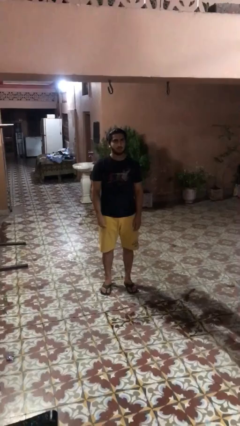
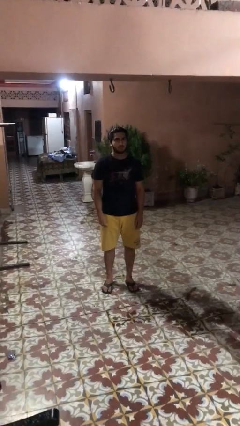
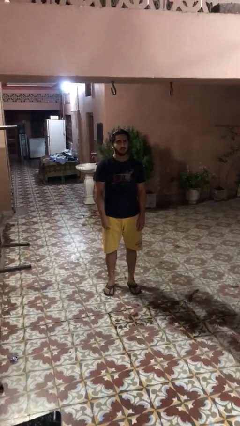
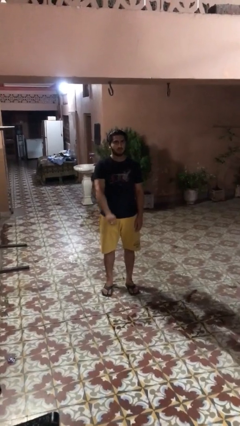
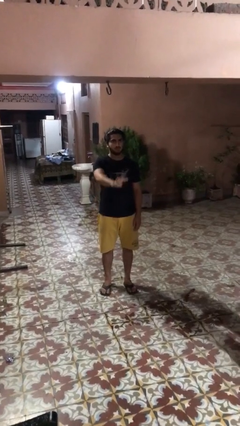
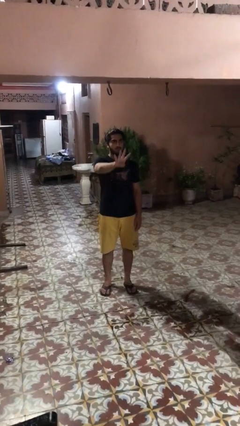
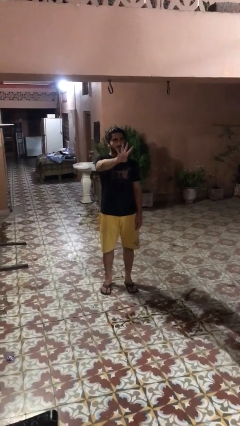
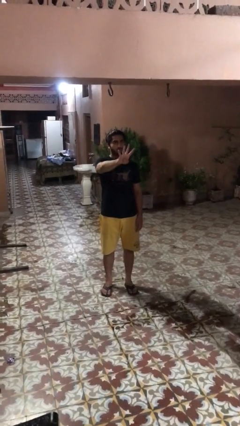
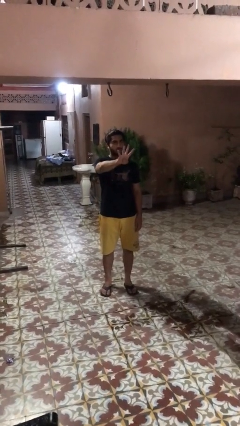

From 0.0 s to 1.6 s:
person gestures number four

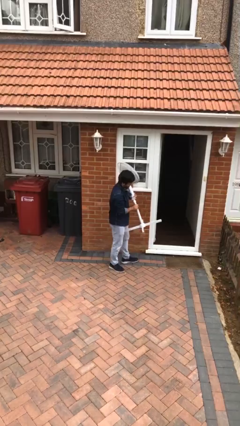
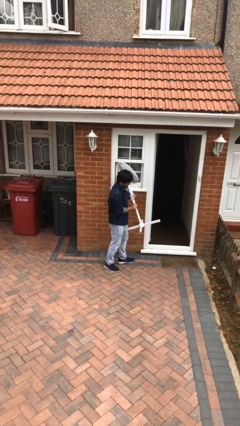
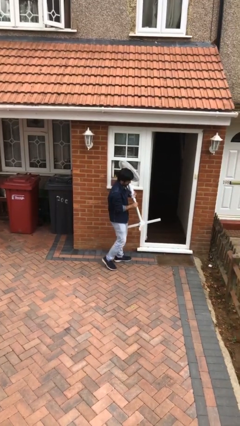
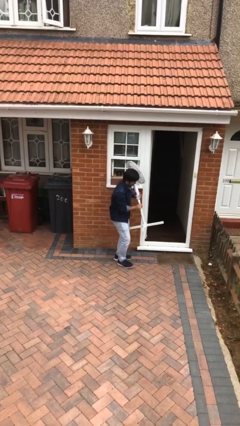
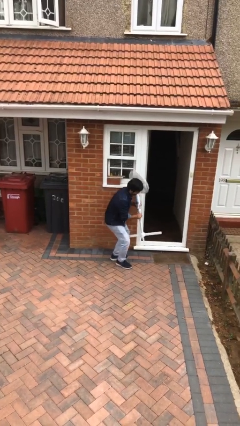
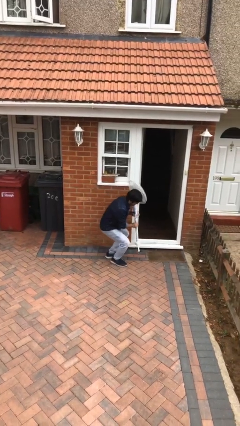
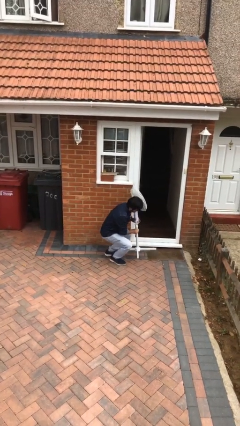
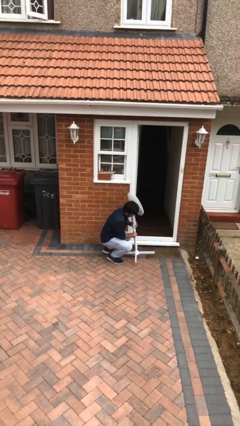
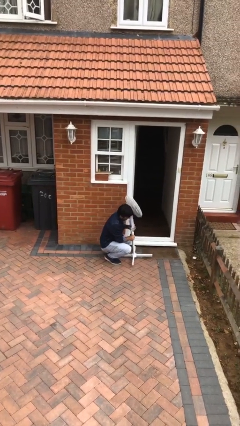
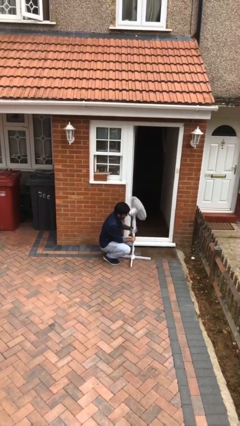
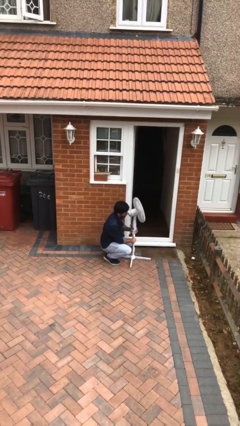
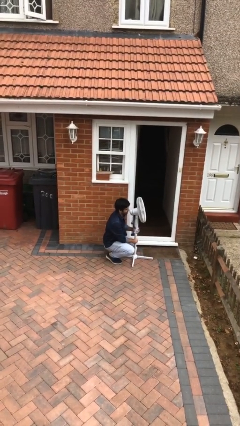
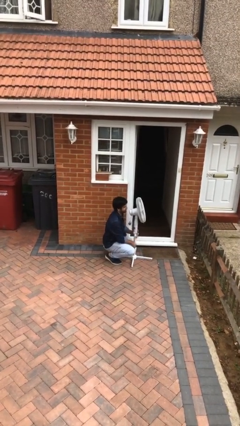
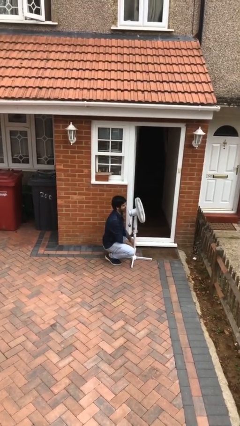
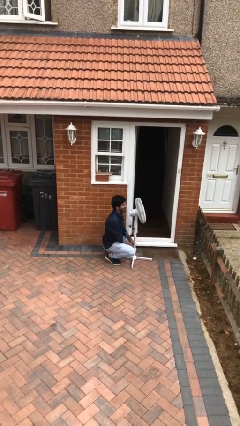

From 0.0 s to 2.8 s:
person puts down object on floor

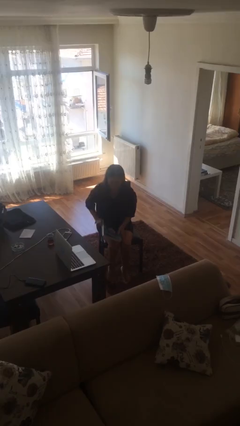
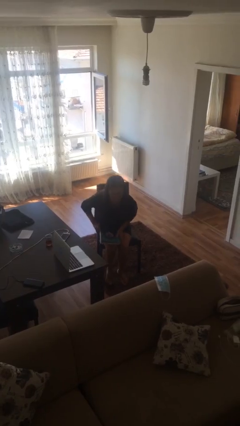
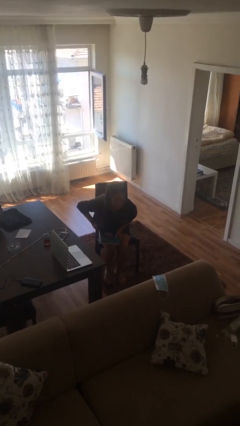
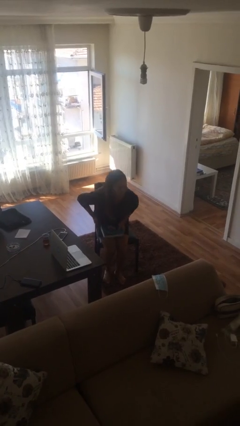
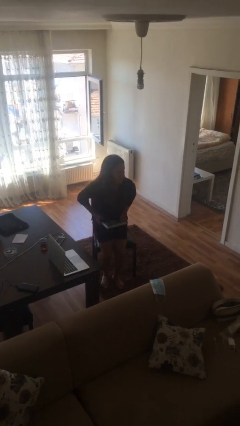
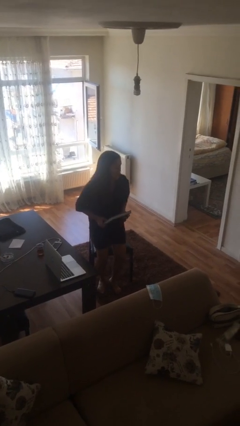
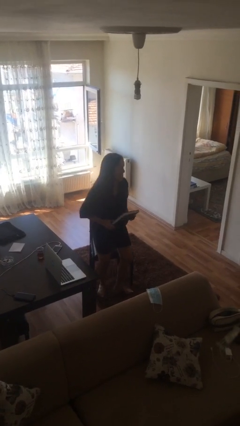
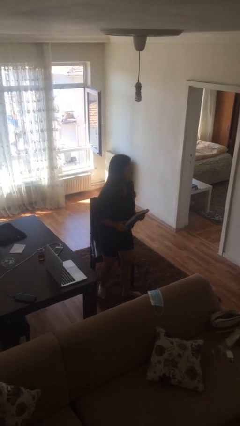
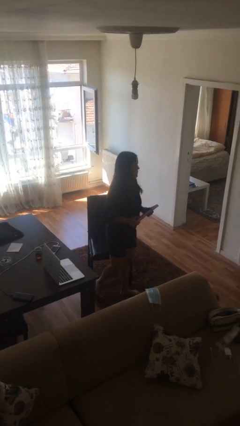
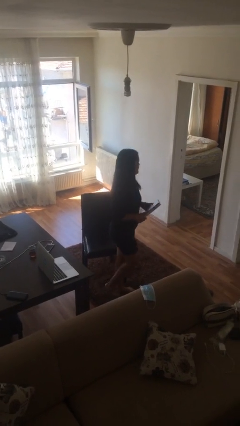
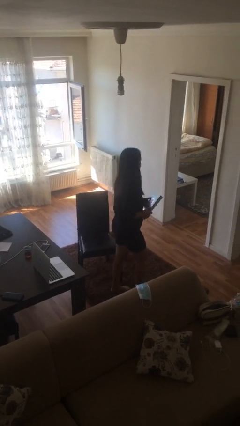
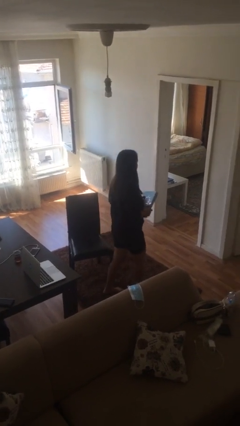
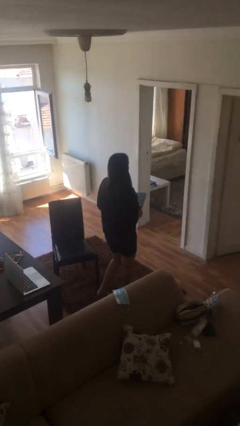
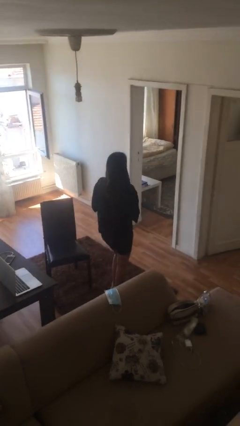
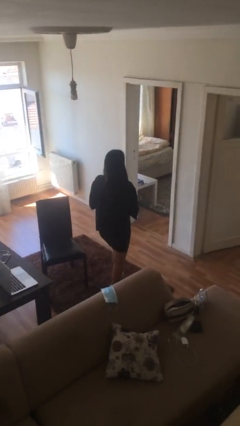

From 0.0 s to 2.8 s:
person stands up

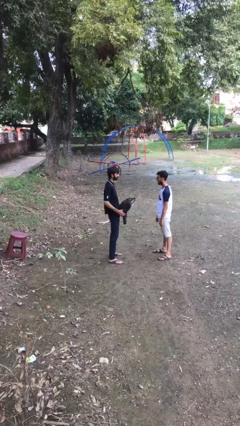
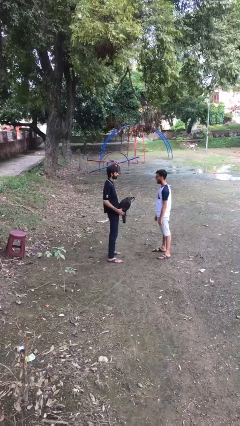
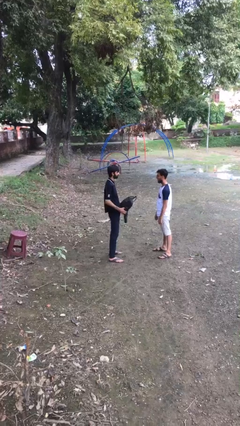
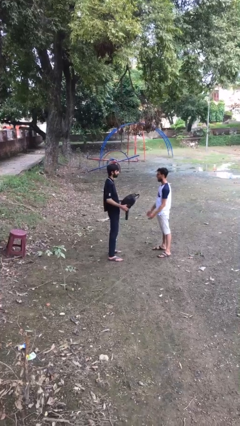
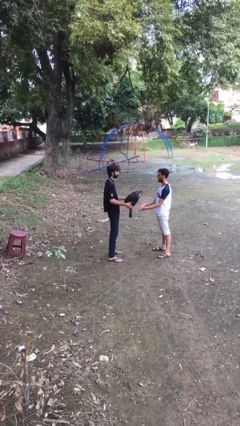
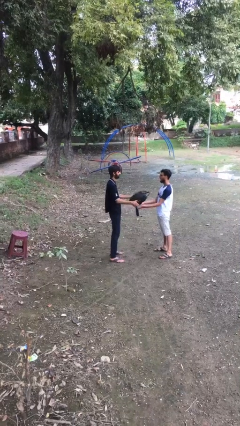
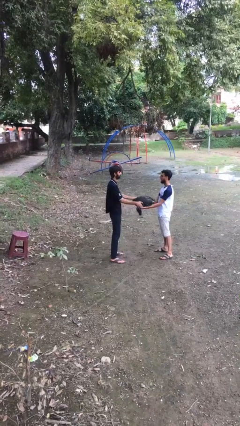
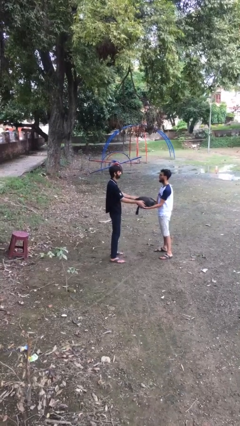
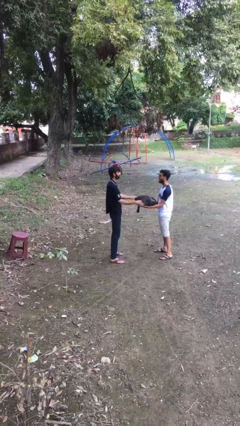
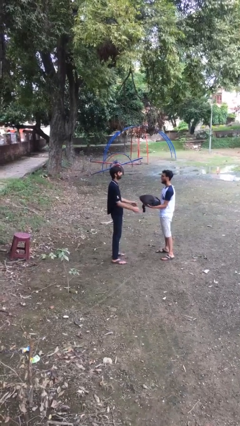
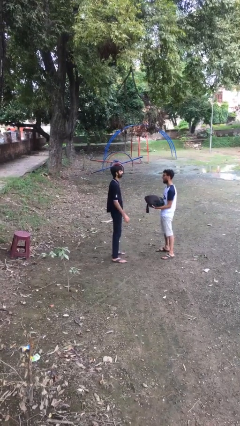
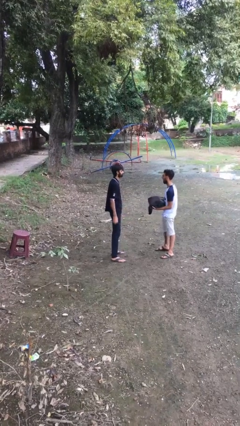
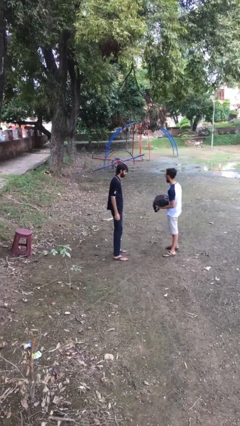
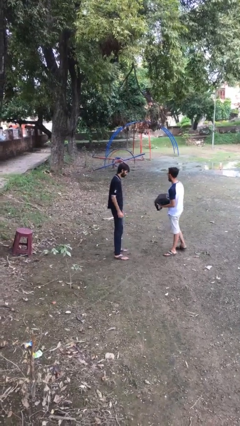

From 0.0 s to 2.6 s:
person transfers object to person

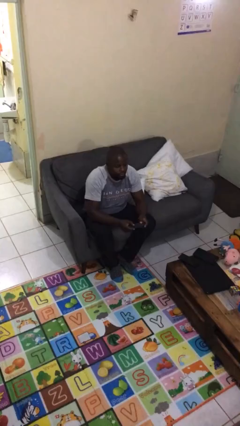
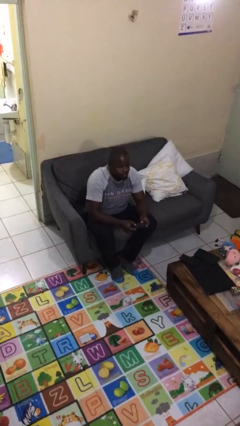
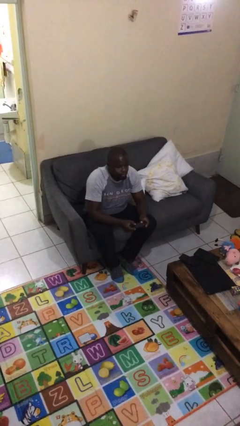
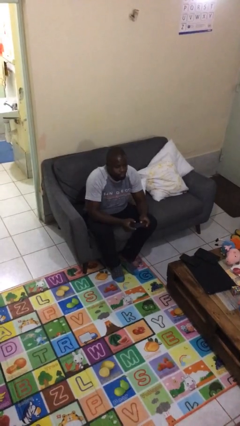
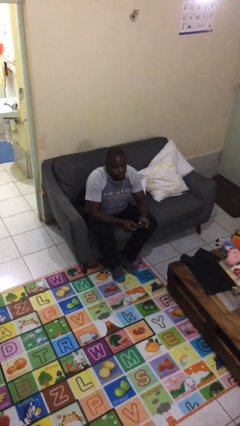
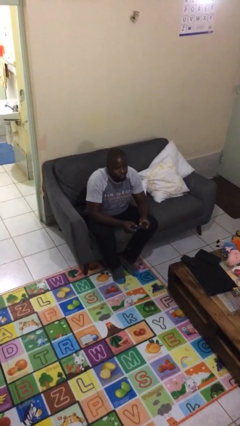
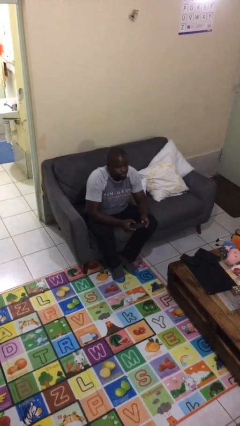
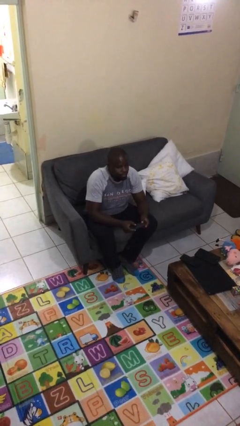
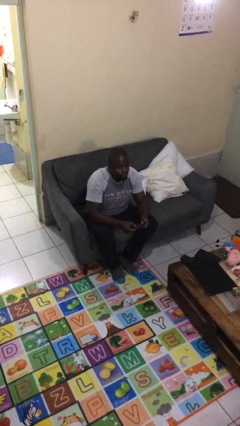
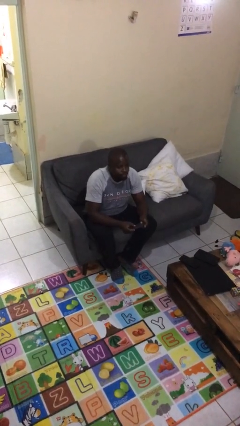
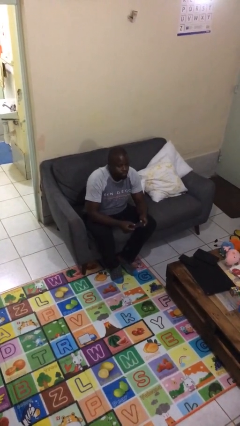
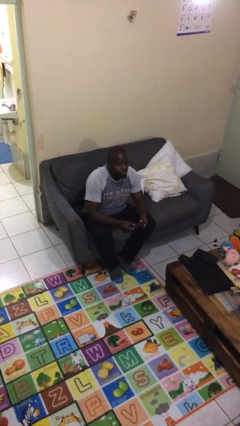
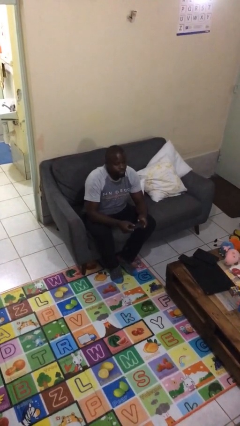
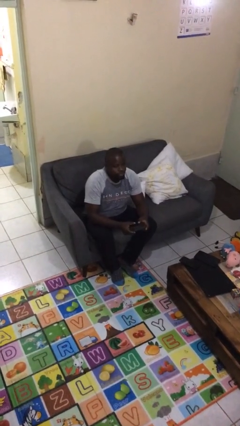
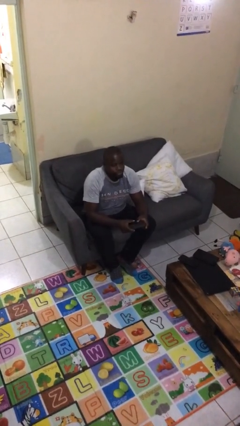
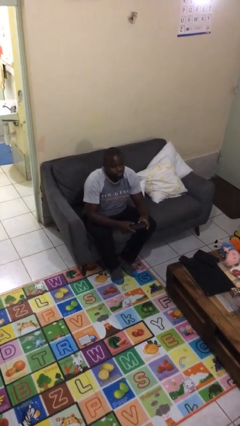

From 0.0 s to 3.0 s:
person interacts with handheld game

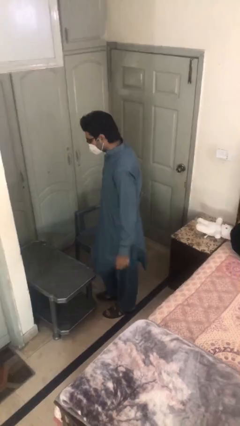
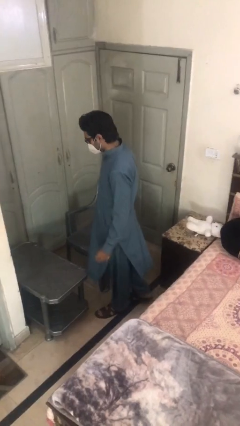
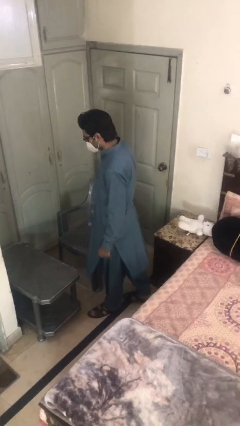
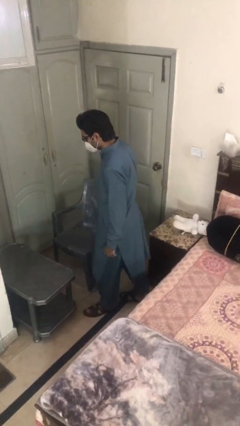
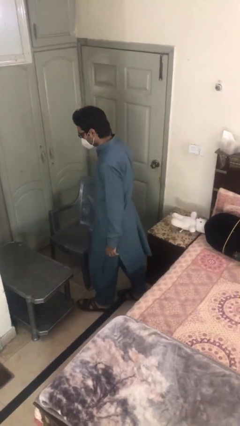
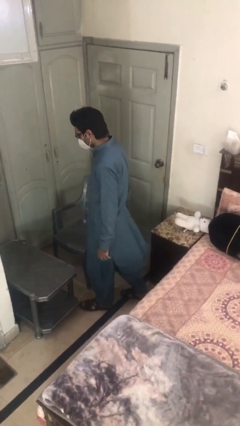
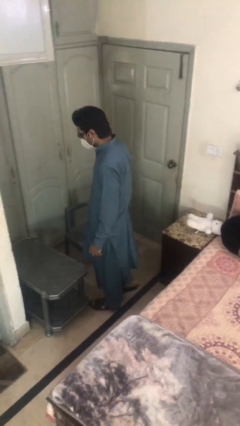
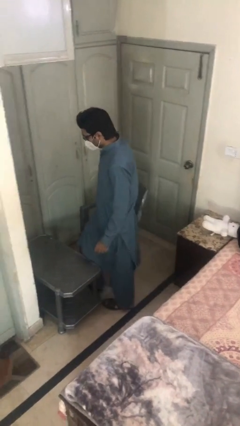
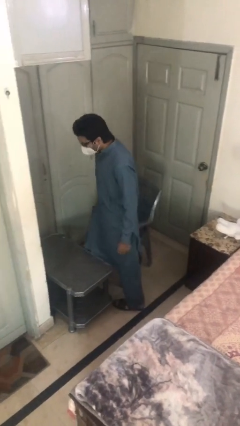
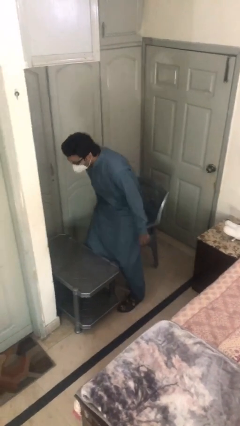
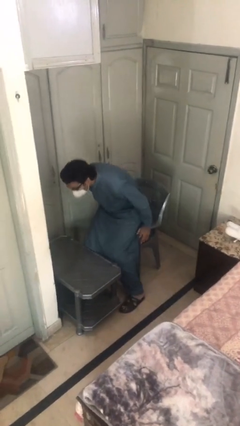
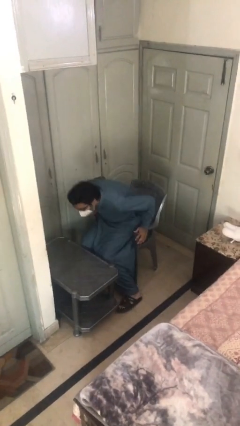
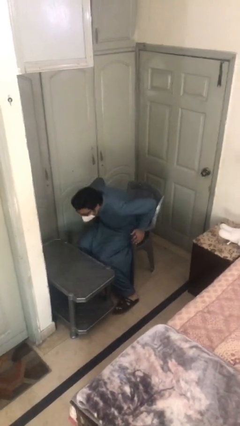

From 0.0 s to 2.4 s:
person sits down

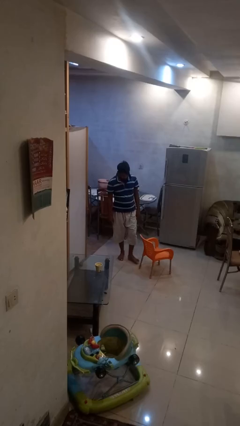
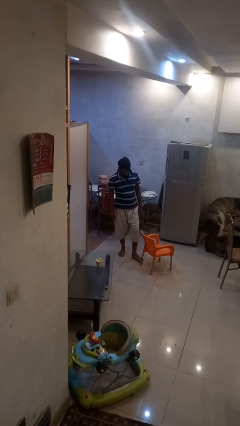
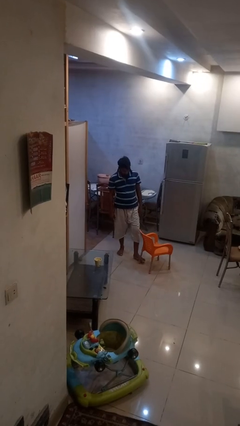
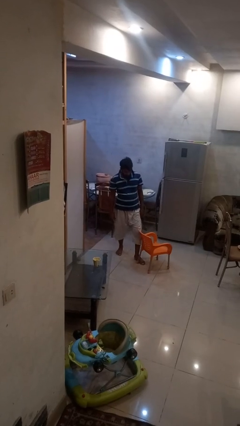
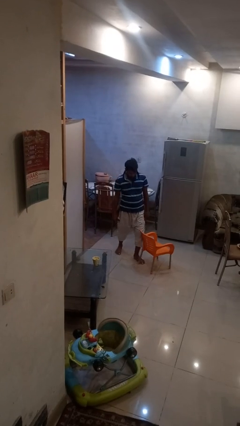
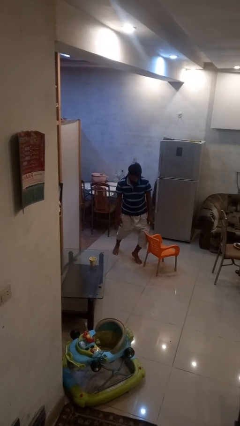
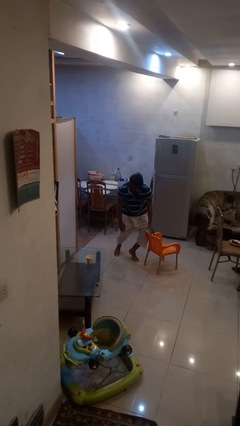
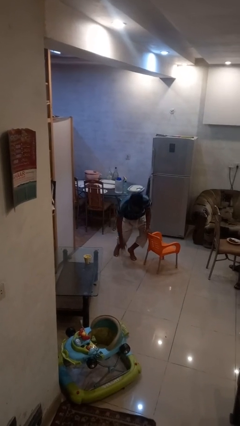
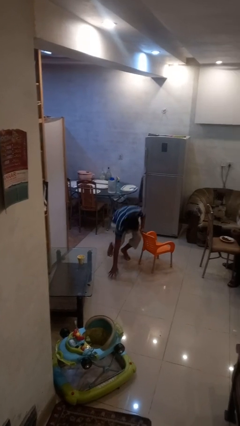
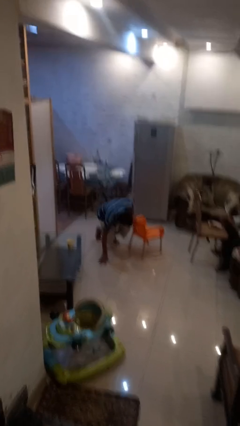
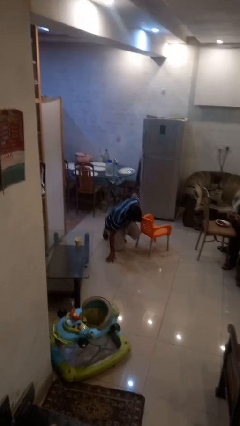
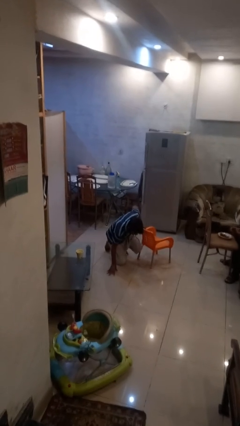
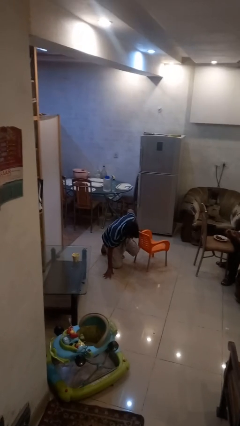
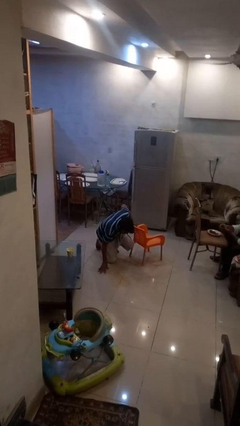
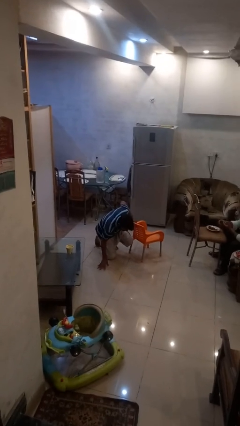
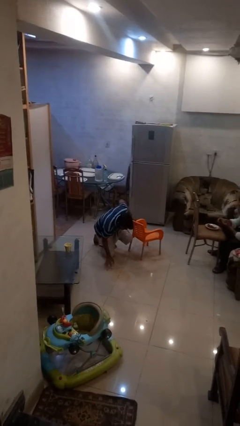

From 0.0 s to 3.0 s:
person trips on object on floor
